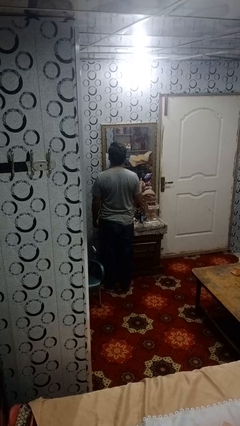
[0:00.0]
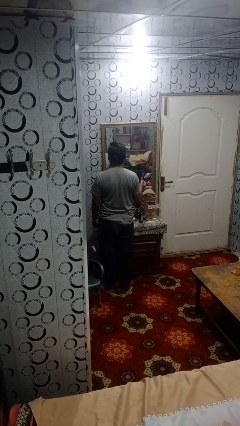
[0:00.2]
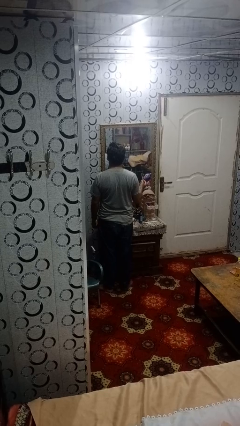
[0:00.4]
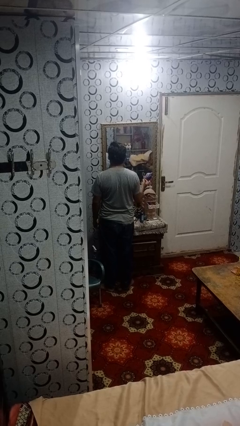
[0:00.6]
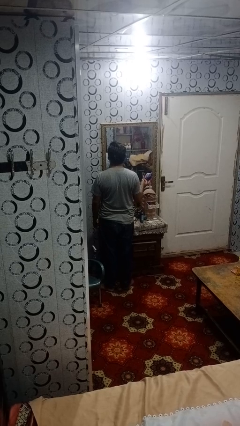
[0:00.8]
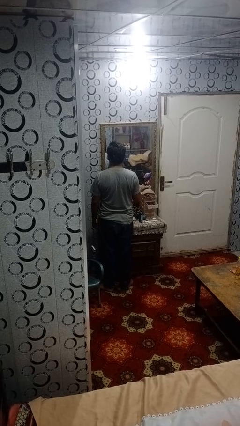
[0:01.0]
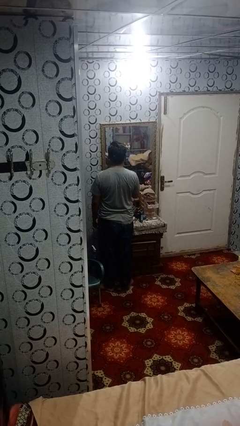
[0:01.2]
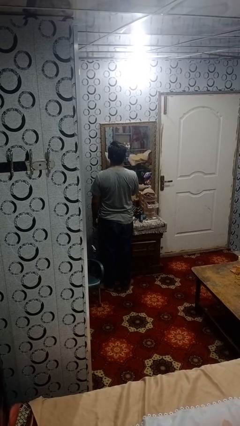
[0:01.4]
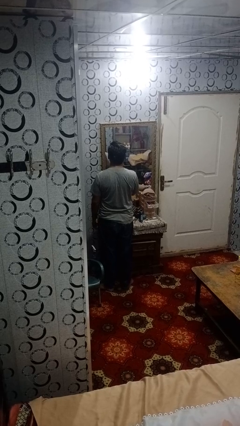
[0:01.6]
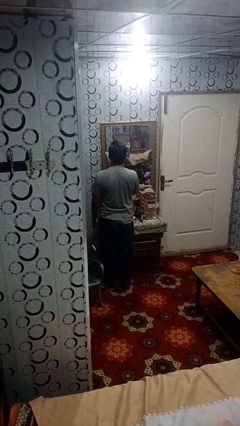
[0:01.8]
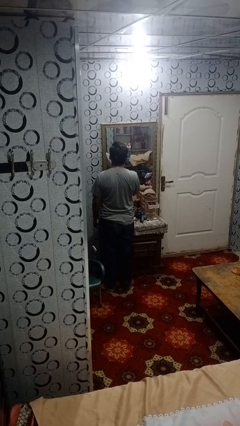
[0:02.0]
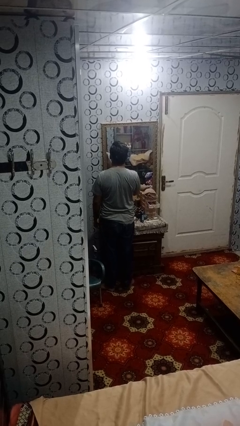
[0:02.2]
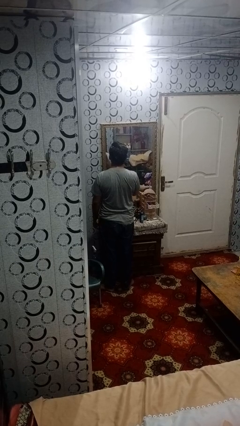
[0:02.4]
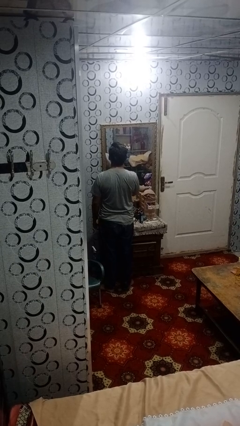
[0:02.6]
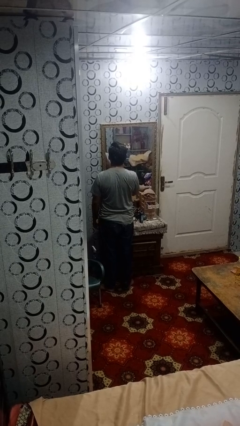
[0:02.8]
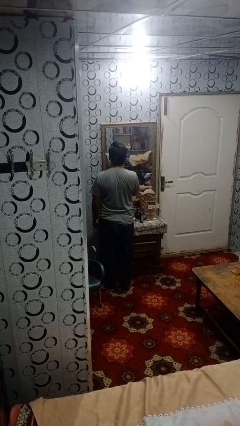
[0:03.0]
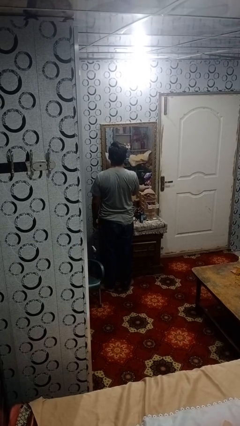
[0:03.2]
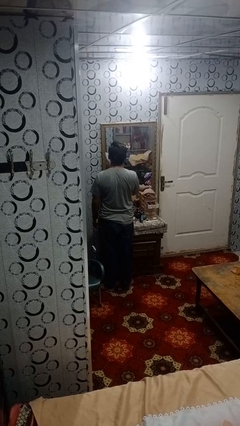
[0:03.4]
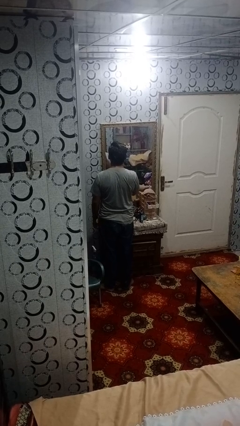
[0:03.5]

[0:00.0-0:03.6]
person applies lip makeup

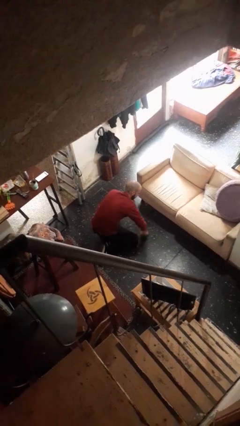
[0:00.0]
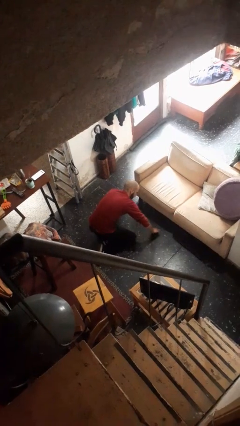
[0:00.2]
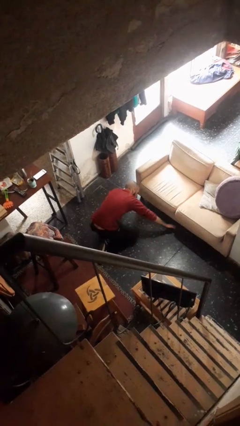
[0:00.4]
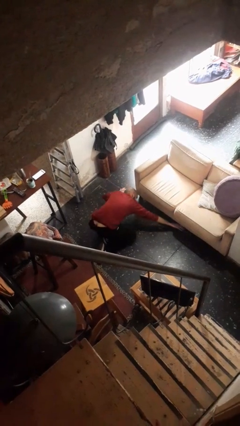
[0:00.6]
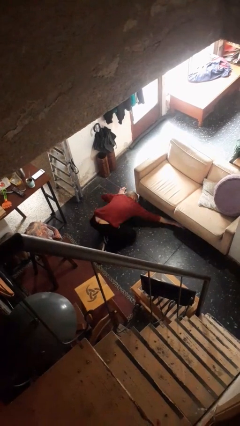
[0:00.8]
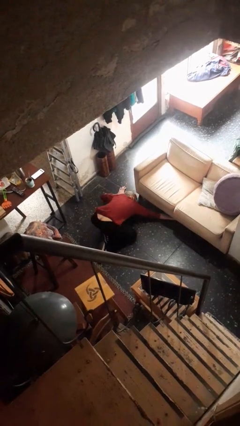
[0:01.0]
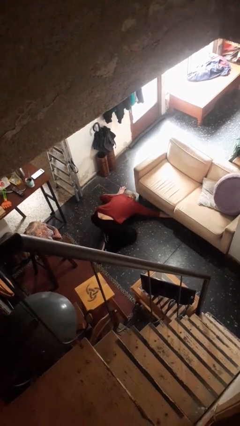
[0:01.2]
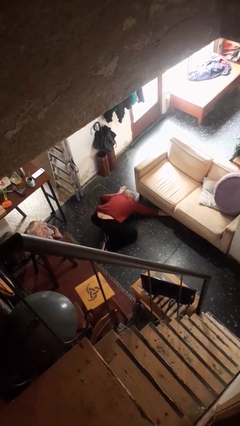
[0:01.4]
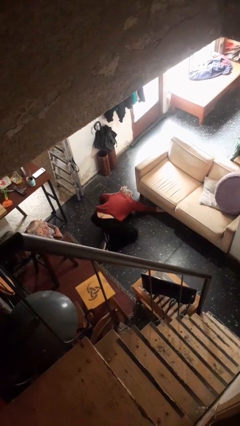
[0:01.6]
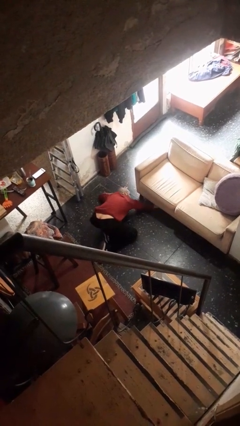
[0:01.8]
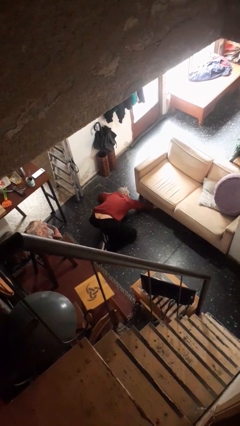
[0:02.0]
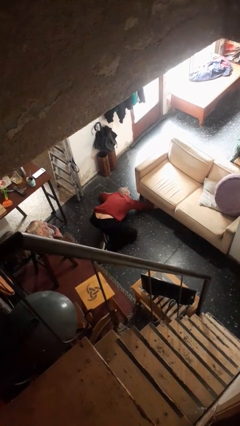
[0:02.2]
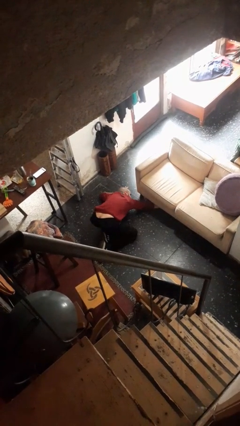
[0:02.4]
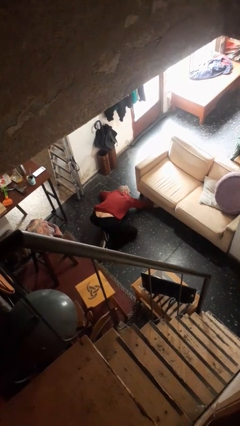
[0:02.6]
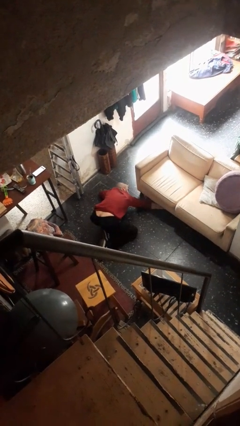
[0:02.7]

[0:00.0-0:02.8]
person searches under couch

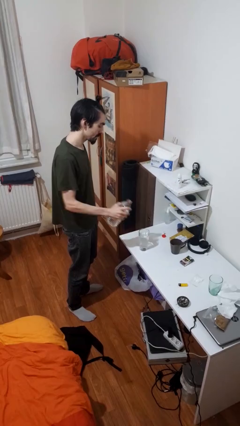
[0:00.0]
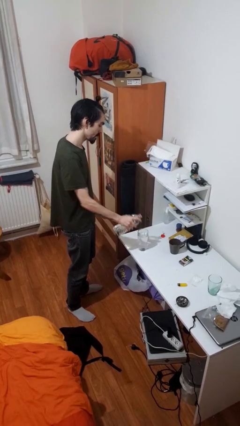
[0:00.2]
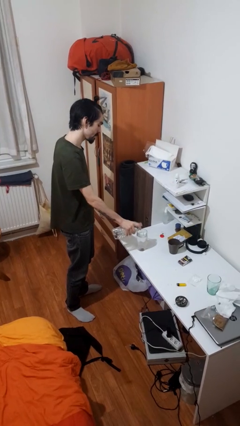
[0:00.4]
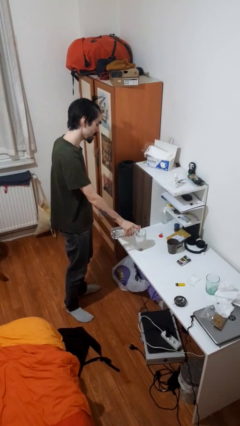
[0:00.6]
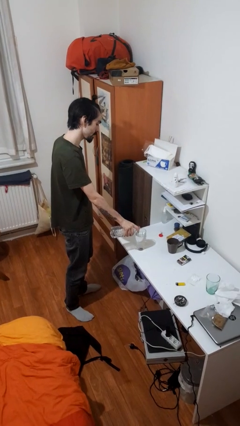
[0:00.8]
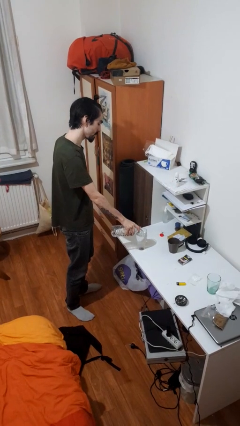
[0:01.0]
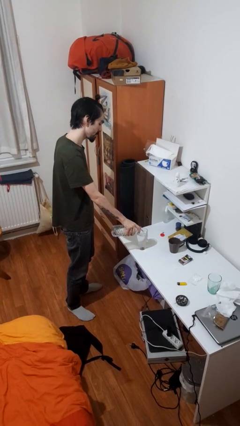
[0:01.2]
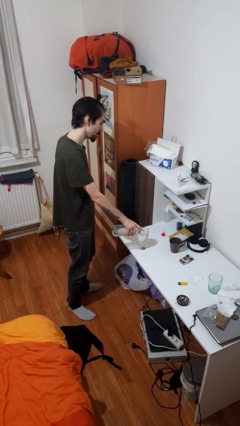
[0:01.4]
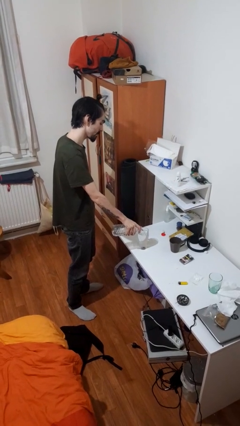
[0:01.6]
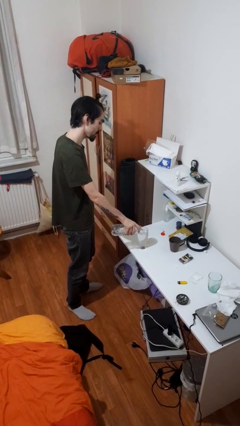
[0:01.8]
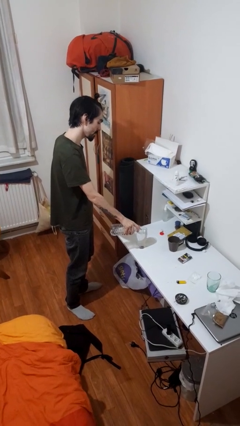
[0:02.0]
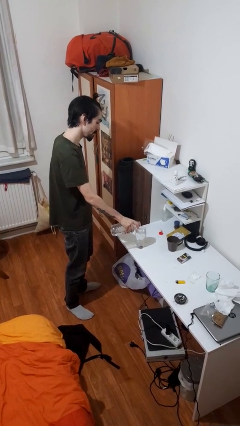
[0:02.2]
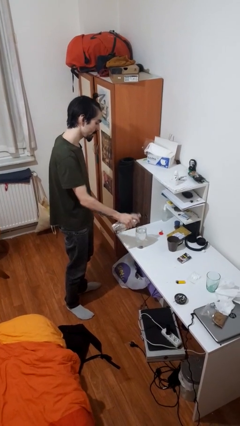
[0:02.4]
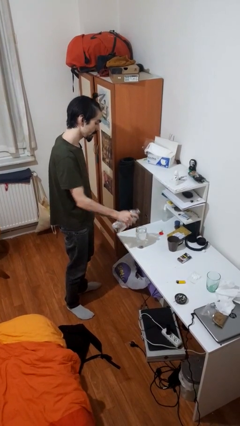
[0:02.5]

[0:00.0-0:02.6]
person pours liquid into cup

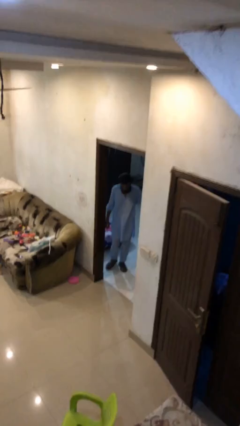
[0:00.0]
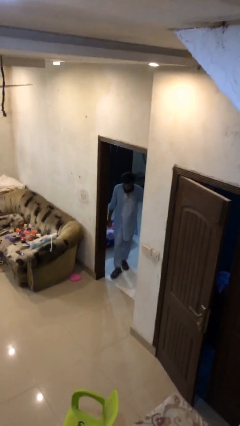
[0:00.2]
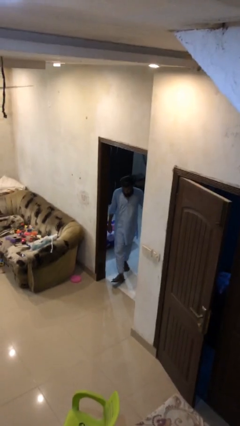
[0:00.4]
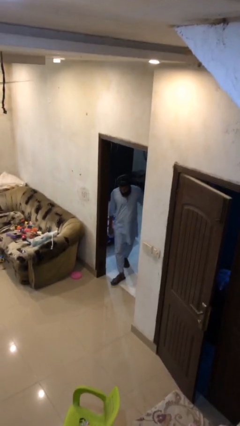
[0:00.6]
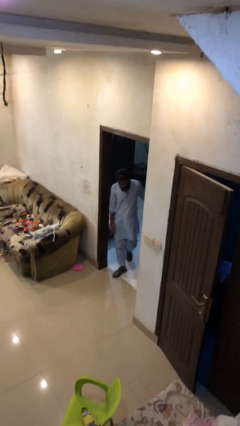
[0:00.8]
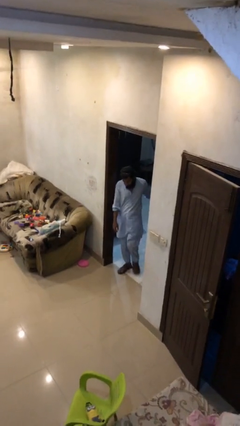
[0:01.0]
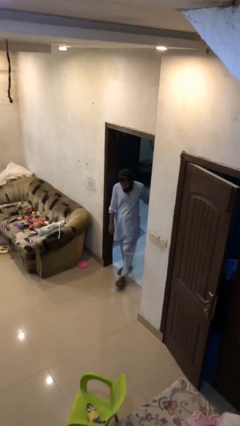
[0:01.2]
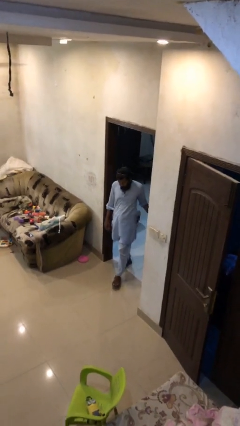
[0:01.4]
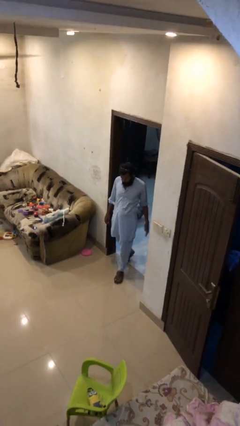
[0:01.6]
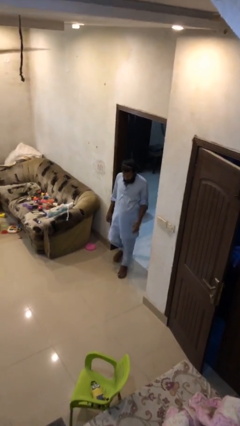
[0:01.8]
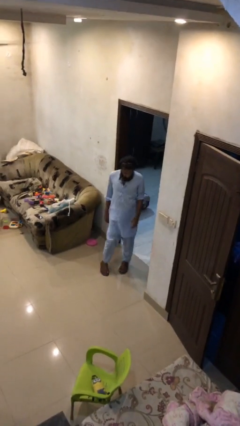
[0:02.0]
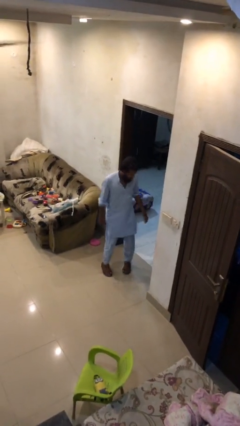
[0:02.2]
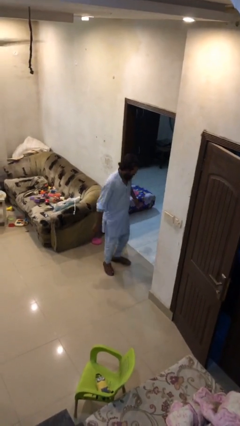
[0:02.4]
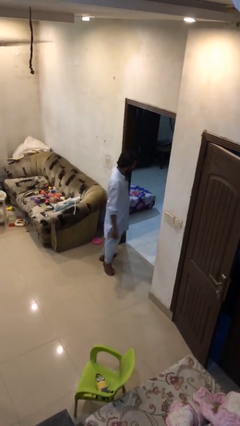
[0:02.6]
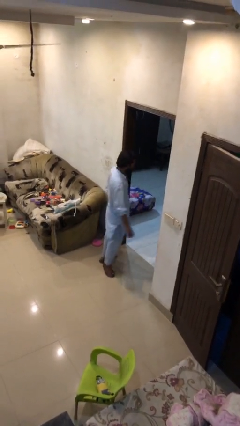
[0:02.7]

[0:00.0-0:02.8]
person enters scene through structure

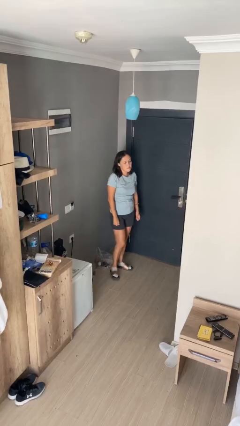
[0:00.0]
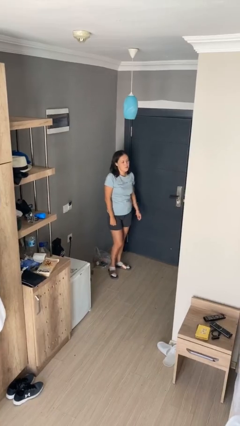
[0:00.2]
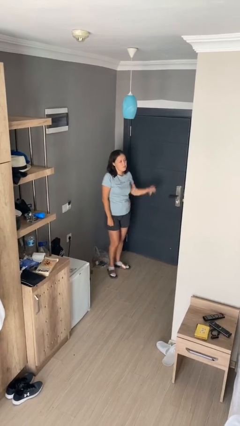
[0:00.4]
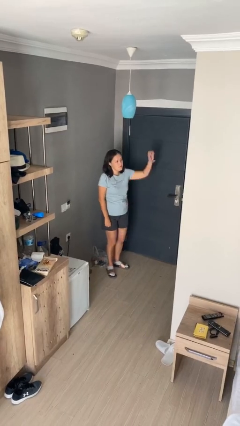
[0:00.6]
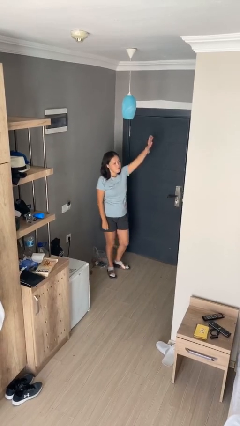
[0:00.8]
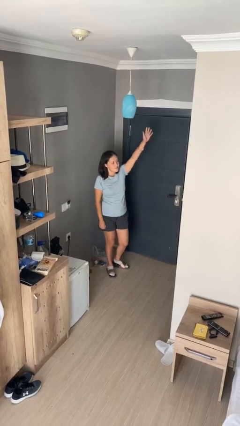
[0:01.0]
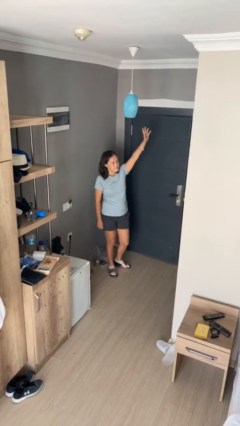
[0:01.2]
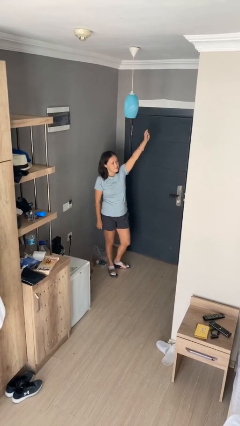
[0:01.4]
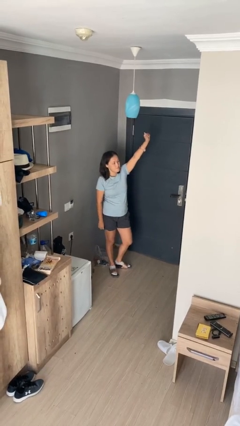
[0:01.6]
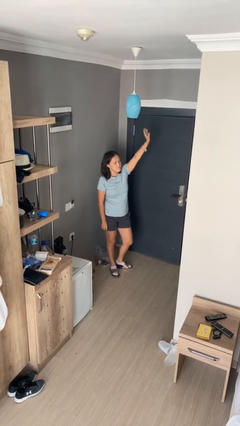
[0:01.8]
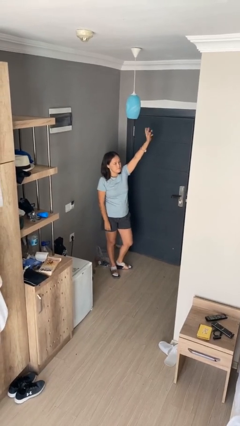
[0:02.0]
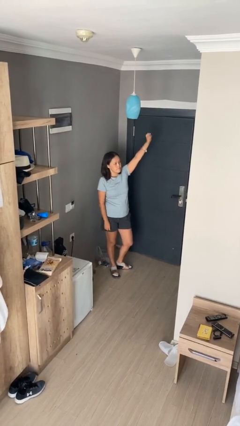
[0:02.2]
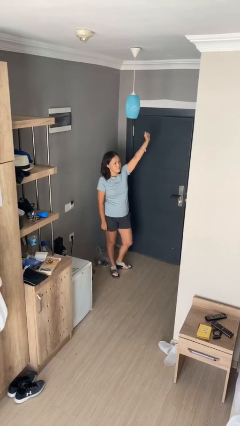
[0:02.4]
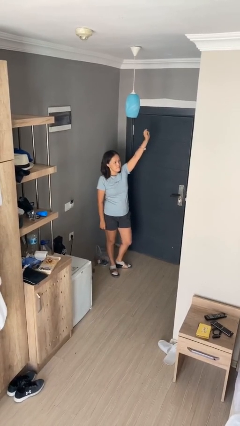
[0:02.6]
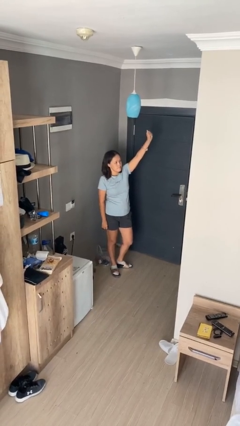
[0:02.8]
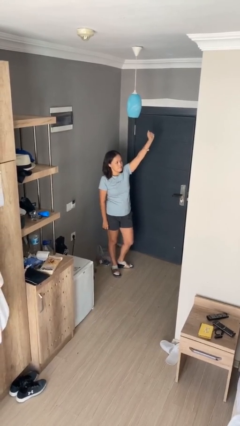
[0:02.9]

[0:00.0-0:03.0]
person gestures raise hand

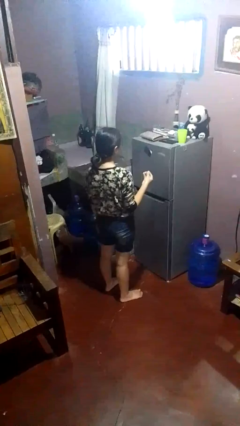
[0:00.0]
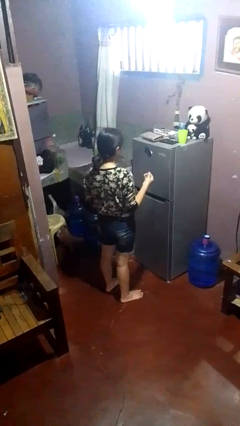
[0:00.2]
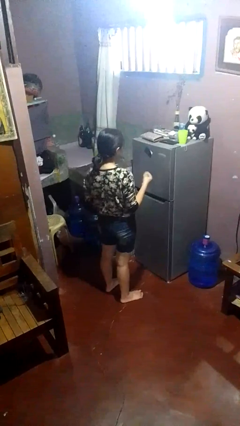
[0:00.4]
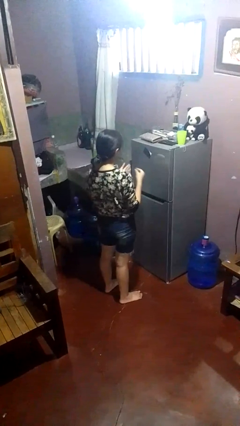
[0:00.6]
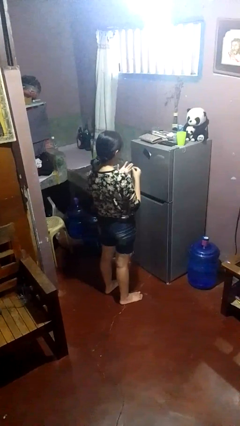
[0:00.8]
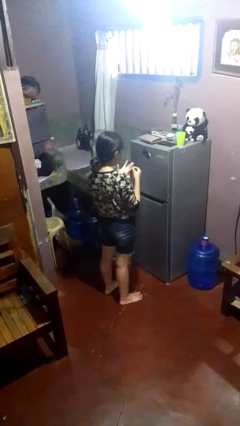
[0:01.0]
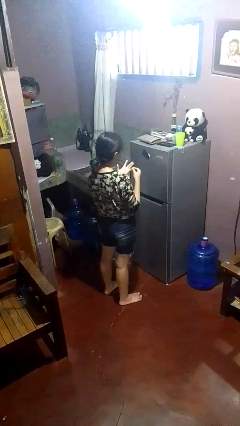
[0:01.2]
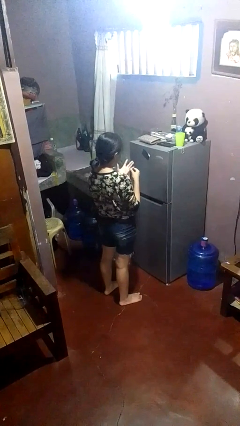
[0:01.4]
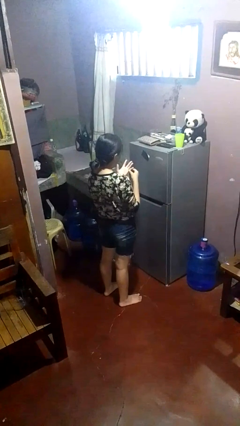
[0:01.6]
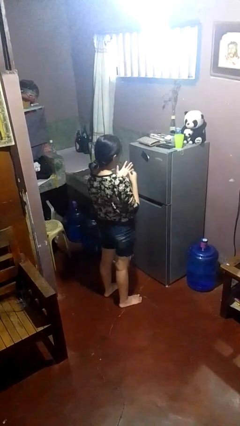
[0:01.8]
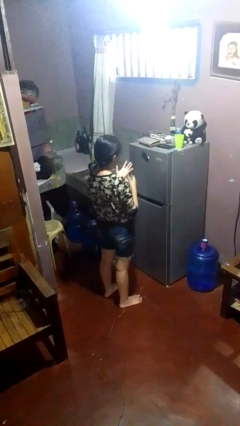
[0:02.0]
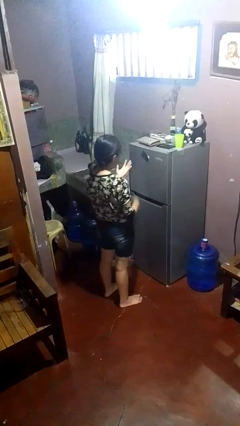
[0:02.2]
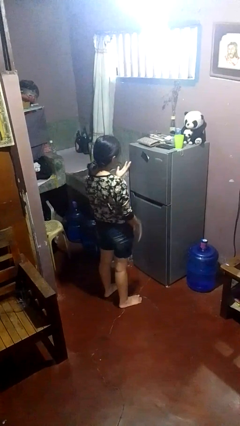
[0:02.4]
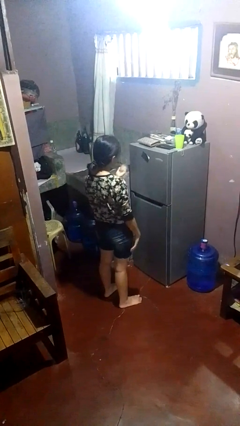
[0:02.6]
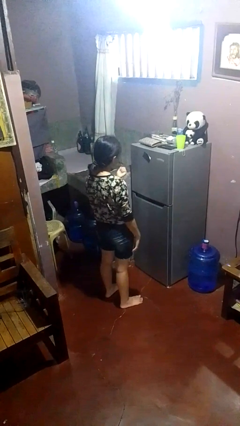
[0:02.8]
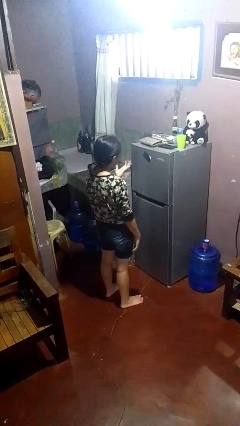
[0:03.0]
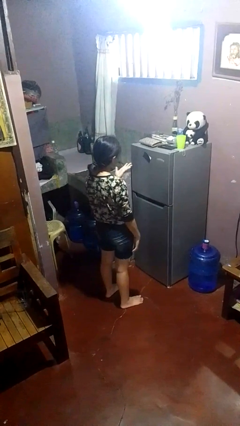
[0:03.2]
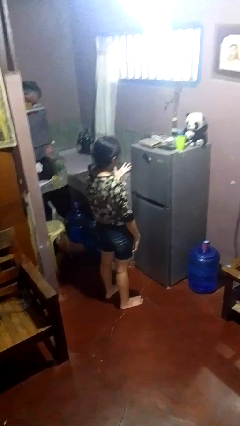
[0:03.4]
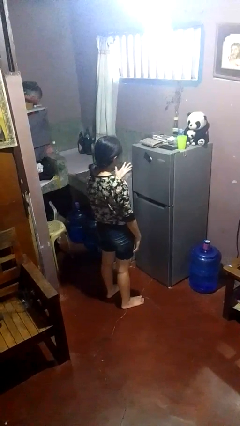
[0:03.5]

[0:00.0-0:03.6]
person puts on ring
